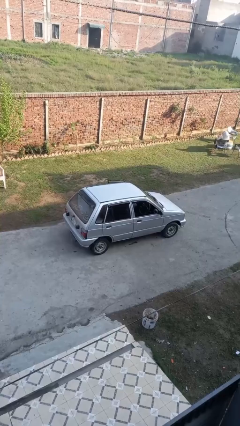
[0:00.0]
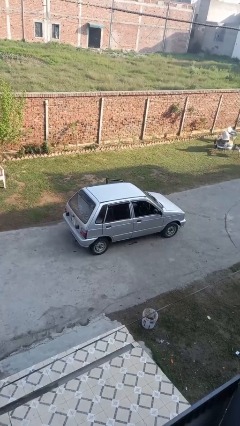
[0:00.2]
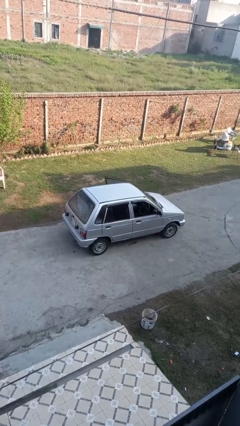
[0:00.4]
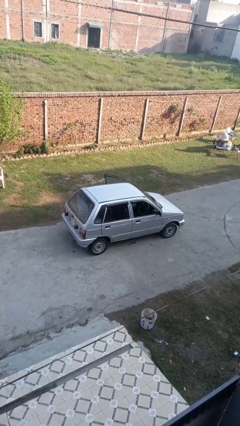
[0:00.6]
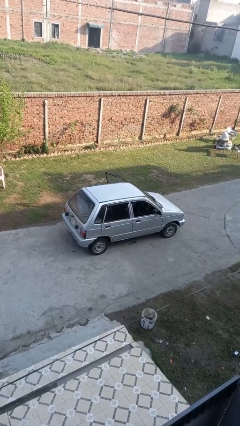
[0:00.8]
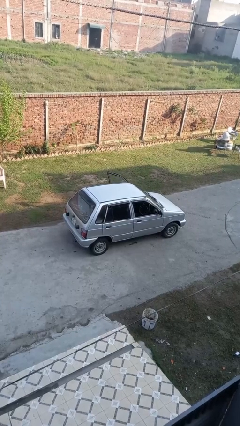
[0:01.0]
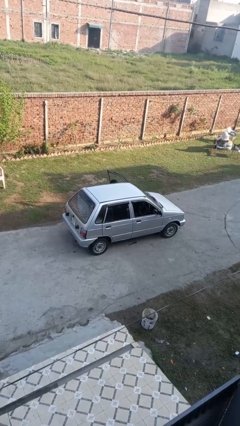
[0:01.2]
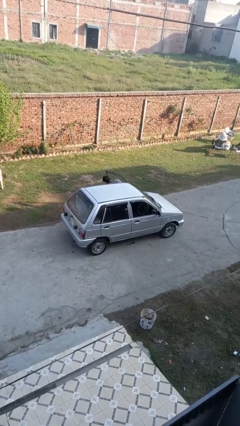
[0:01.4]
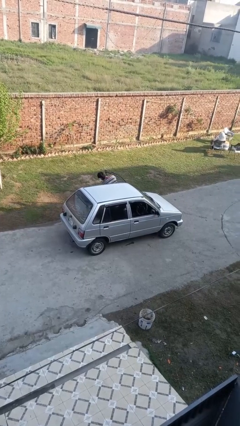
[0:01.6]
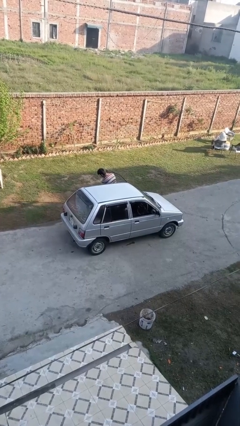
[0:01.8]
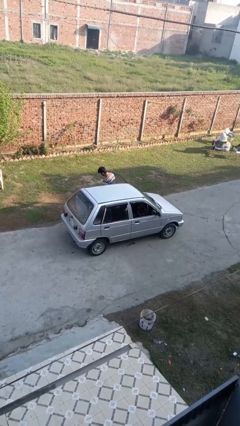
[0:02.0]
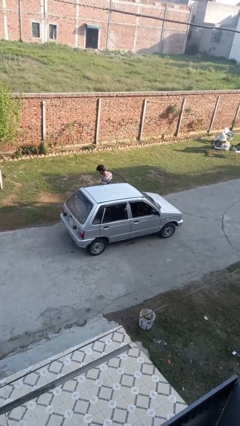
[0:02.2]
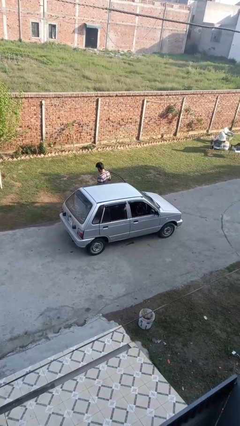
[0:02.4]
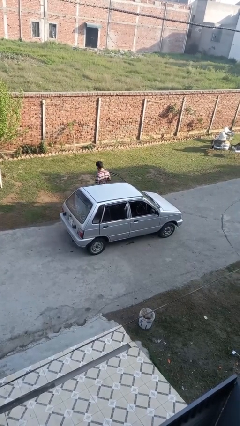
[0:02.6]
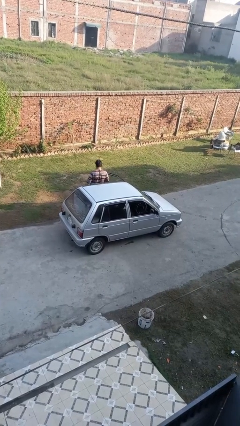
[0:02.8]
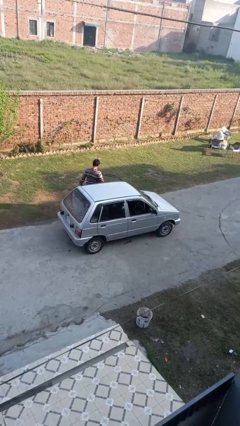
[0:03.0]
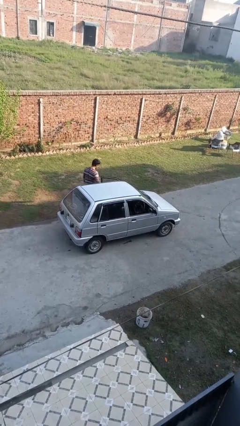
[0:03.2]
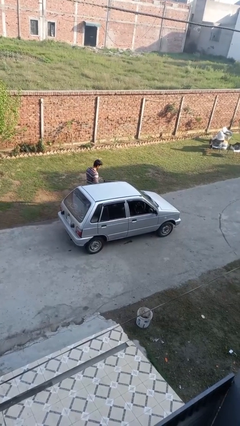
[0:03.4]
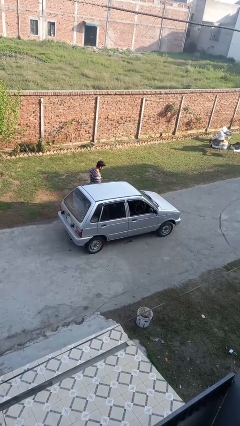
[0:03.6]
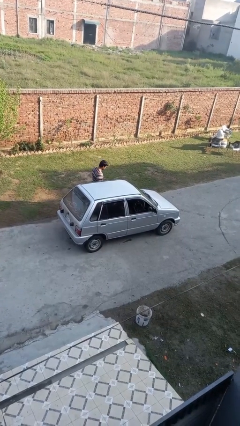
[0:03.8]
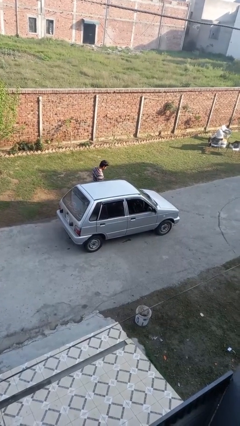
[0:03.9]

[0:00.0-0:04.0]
car drops off person

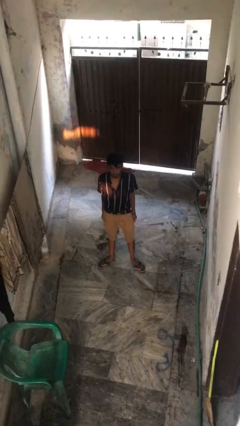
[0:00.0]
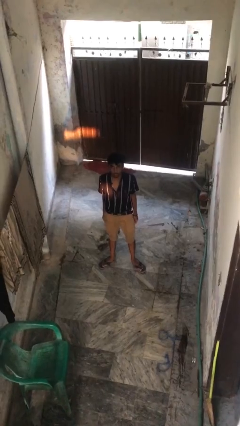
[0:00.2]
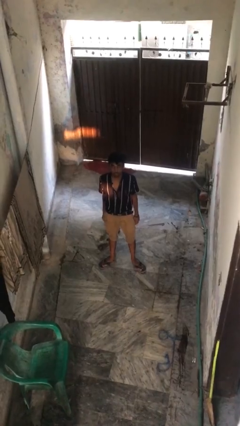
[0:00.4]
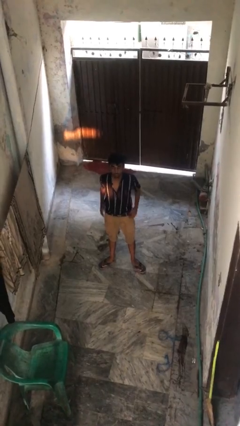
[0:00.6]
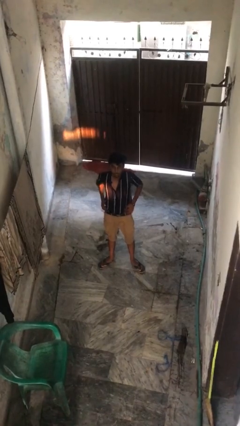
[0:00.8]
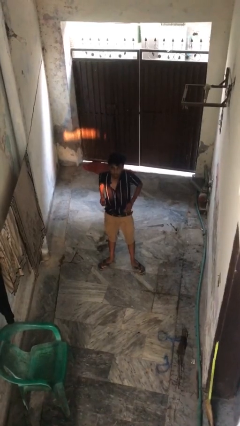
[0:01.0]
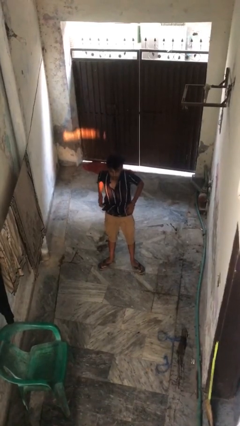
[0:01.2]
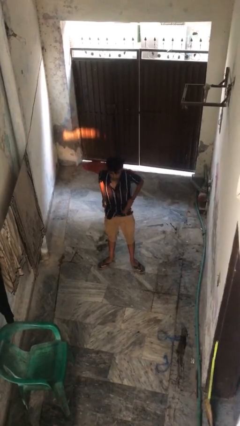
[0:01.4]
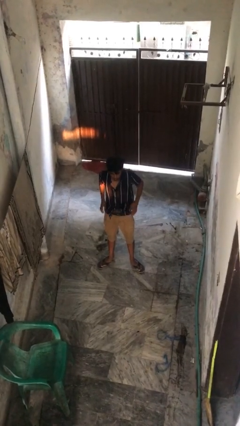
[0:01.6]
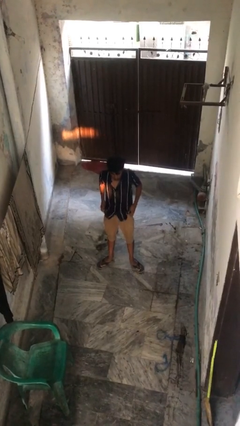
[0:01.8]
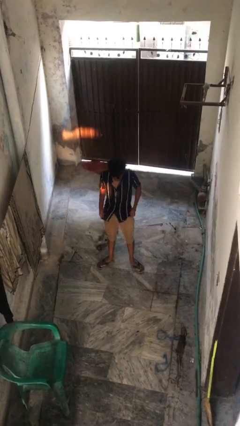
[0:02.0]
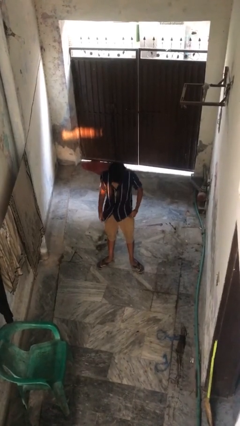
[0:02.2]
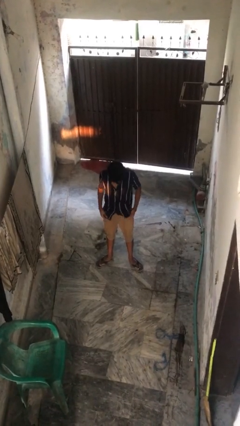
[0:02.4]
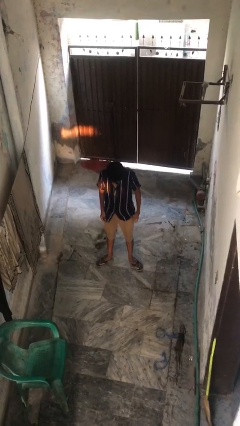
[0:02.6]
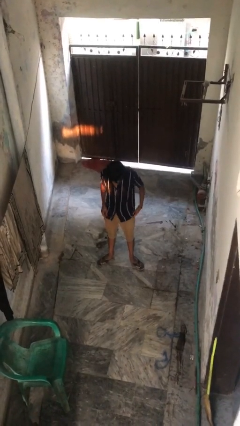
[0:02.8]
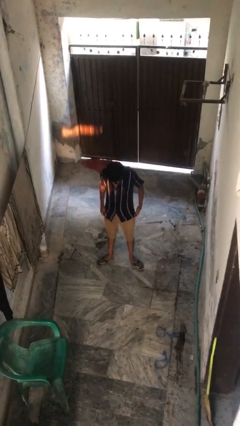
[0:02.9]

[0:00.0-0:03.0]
person untucks shirt

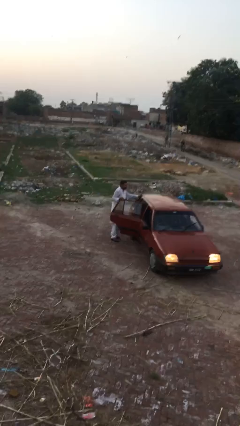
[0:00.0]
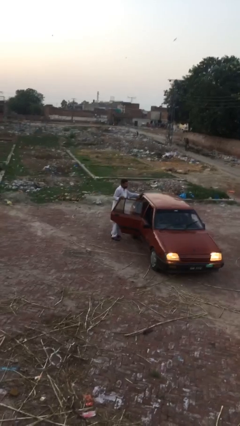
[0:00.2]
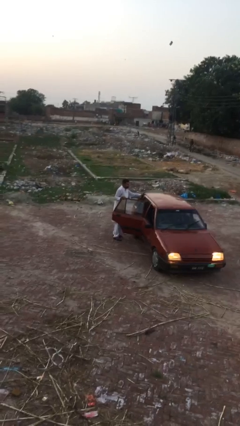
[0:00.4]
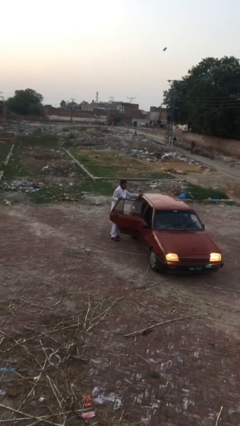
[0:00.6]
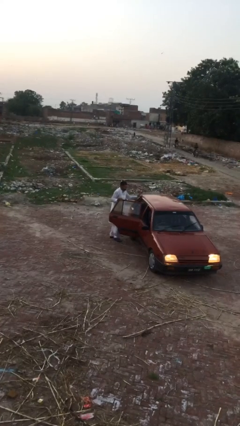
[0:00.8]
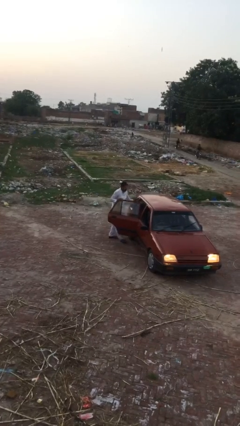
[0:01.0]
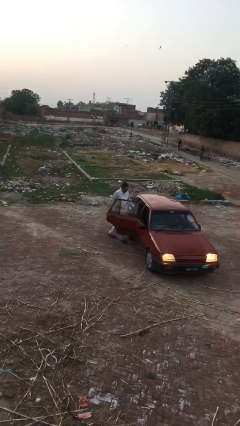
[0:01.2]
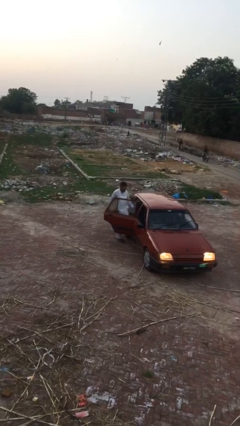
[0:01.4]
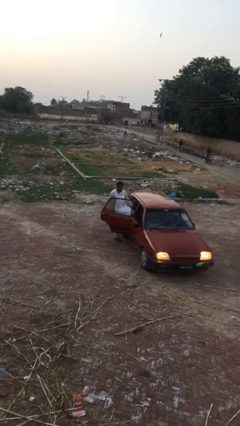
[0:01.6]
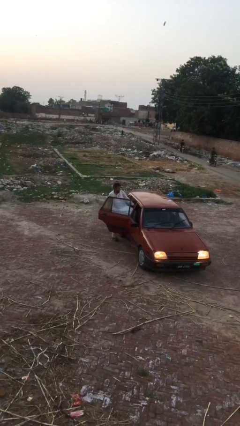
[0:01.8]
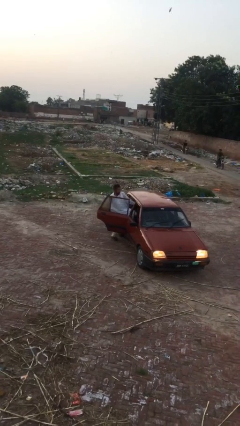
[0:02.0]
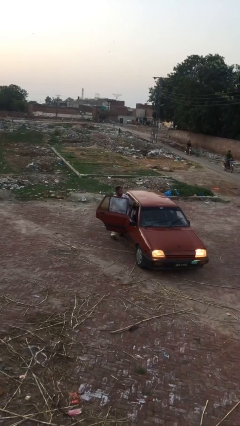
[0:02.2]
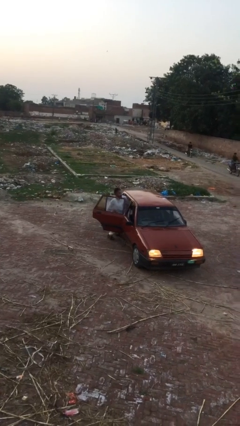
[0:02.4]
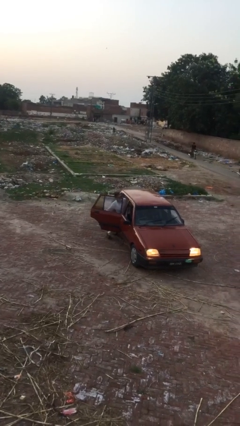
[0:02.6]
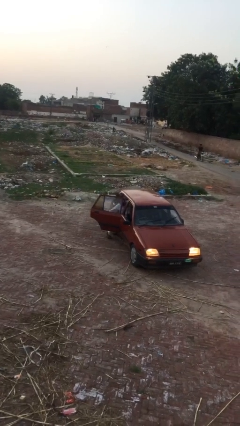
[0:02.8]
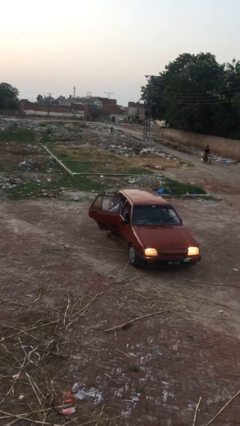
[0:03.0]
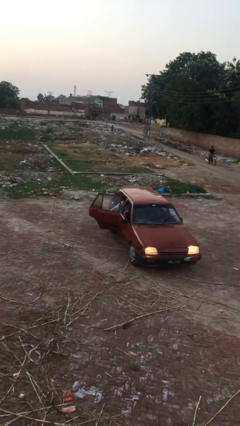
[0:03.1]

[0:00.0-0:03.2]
person enters car

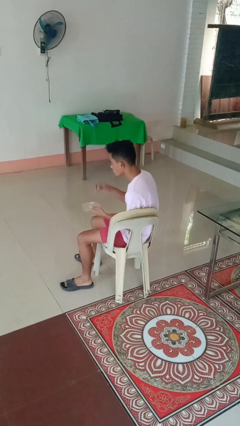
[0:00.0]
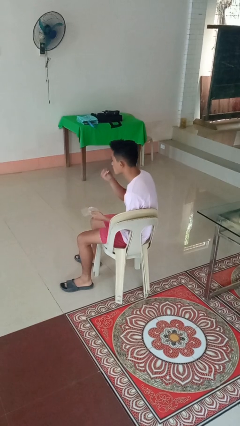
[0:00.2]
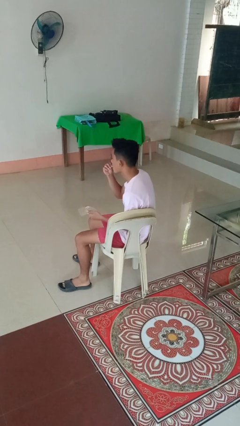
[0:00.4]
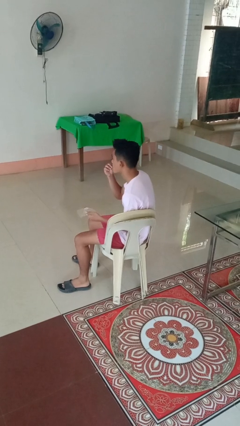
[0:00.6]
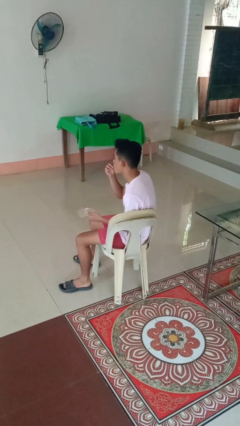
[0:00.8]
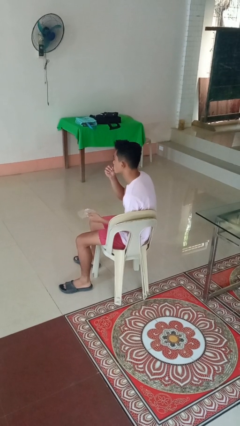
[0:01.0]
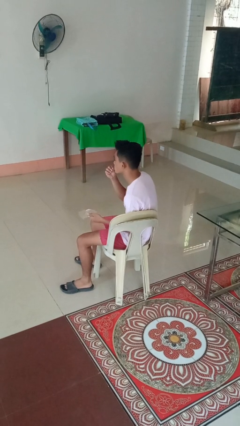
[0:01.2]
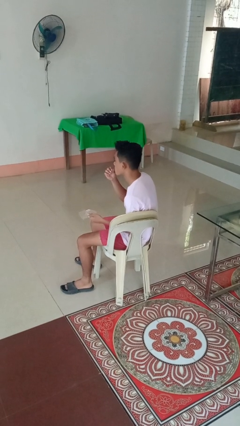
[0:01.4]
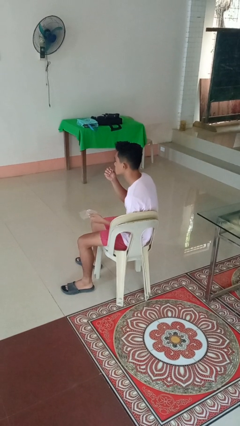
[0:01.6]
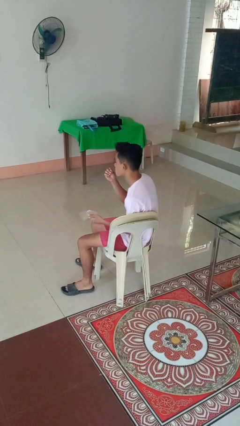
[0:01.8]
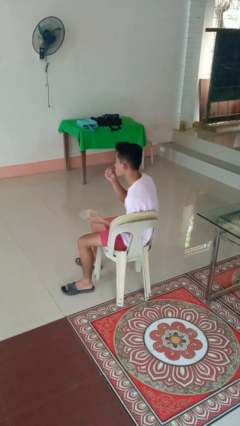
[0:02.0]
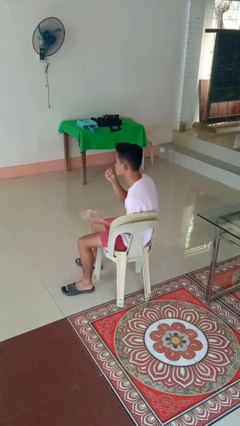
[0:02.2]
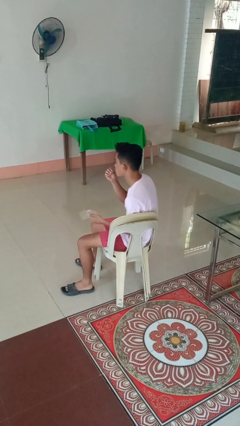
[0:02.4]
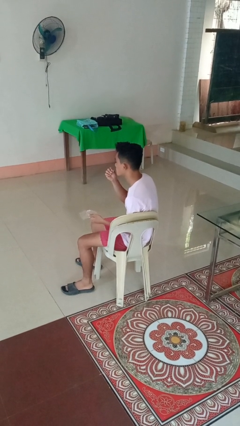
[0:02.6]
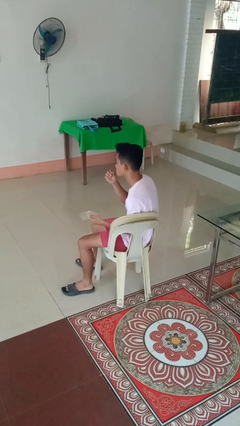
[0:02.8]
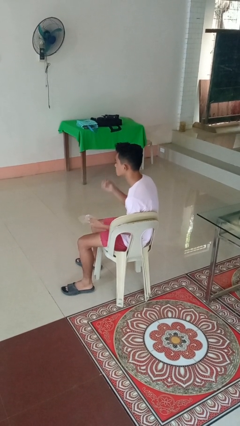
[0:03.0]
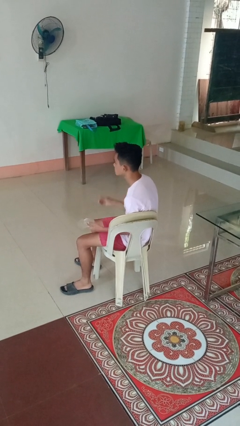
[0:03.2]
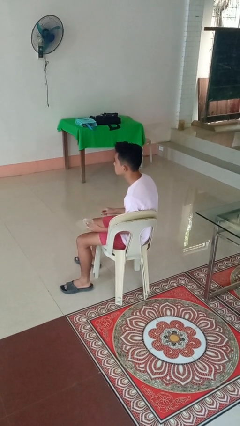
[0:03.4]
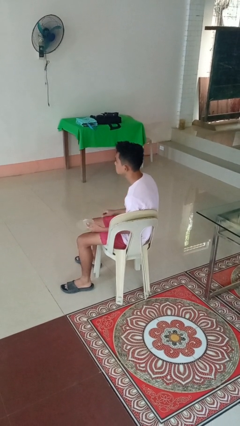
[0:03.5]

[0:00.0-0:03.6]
person eats snack from bag

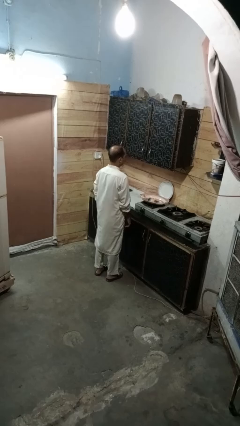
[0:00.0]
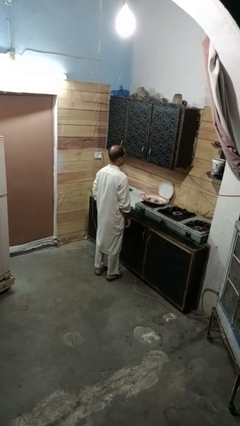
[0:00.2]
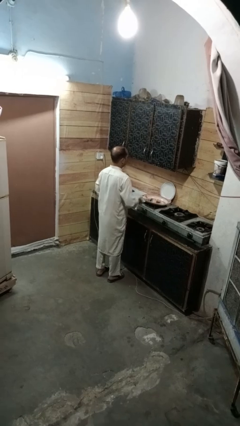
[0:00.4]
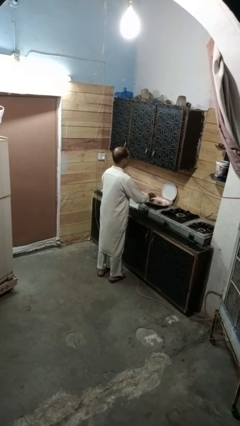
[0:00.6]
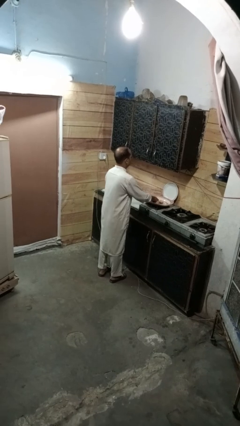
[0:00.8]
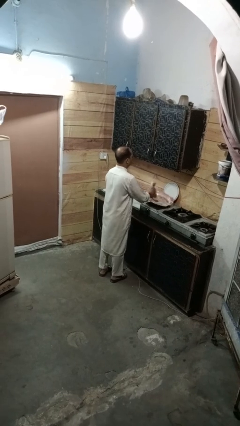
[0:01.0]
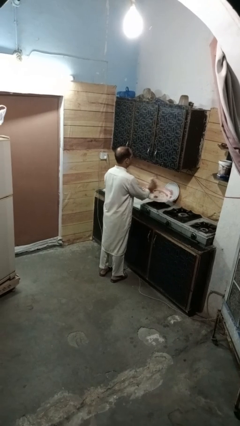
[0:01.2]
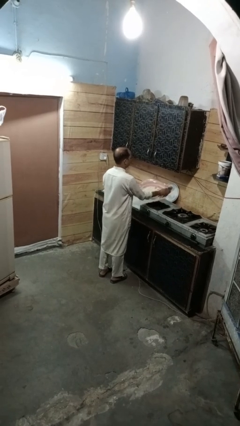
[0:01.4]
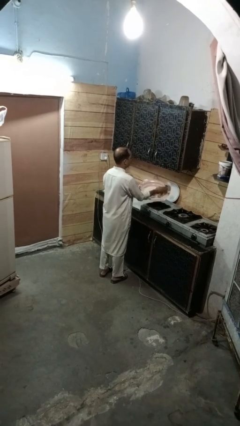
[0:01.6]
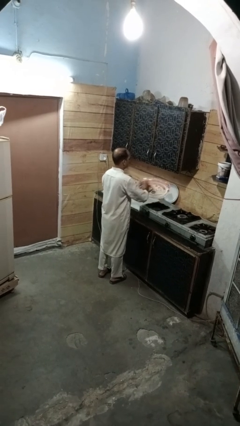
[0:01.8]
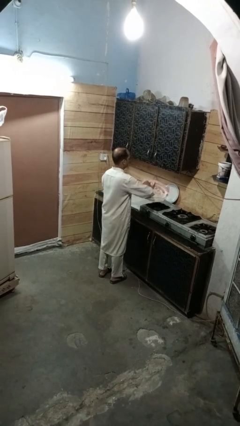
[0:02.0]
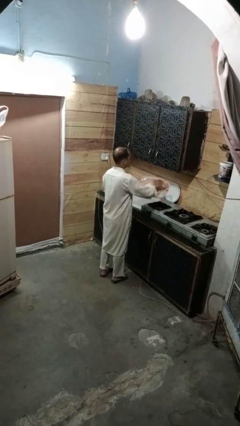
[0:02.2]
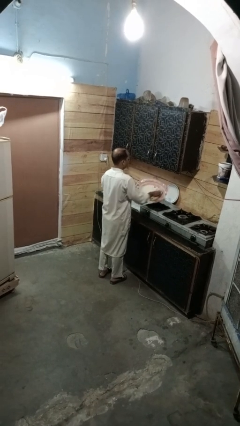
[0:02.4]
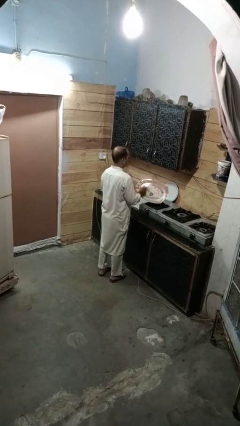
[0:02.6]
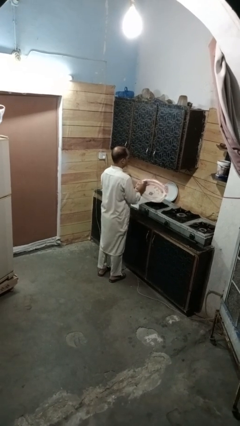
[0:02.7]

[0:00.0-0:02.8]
person dries dish

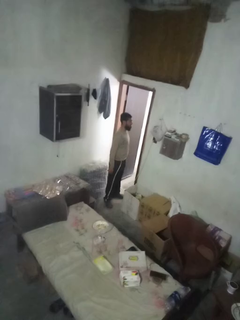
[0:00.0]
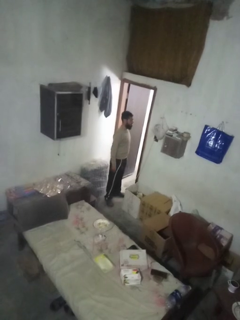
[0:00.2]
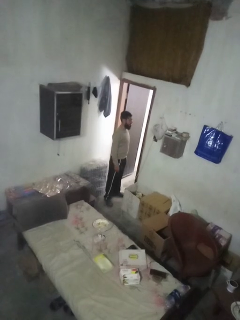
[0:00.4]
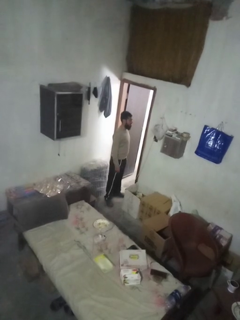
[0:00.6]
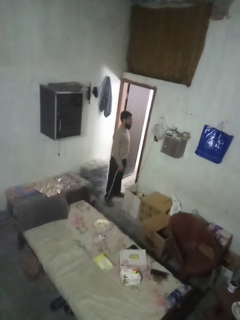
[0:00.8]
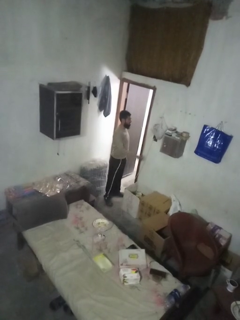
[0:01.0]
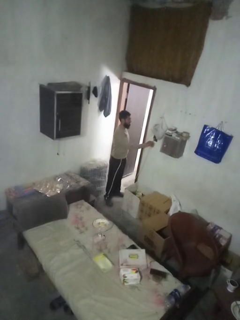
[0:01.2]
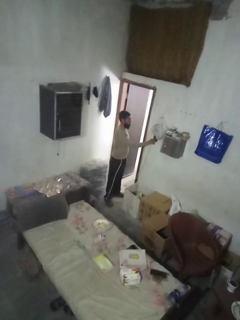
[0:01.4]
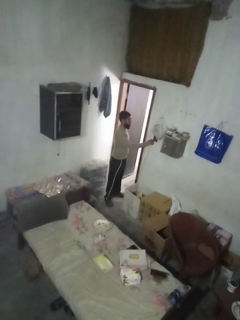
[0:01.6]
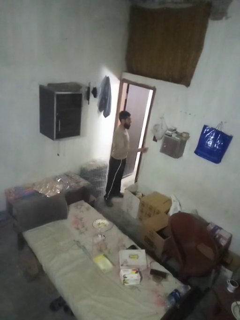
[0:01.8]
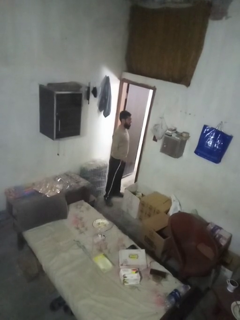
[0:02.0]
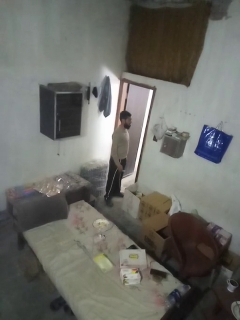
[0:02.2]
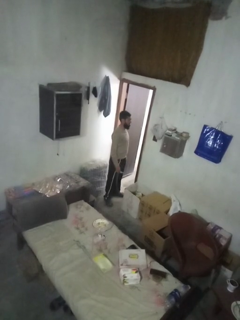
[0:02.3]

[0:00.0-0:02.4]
person unplugs from electrical socket
